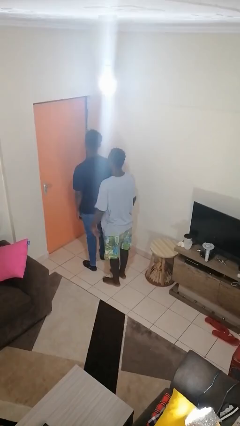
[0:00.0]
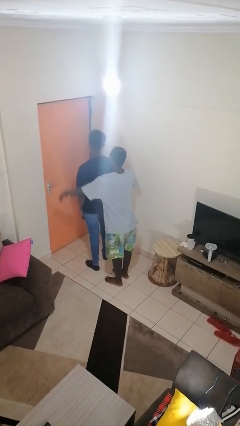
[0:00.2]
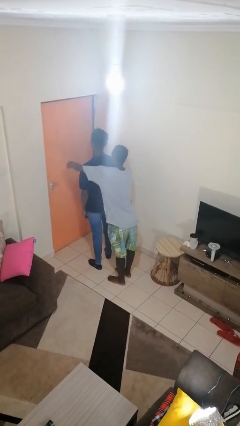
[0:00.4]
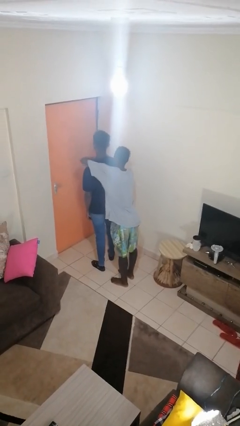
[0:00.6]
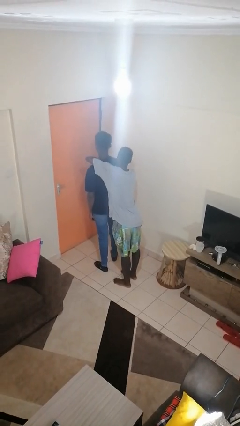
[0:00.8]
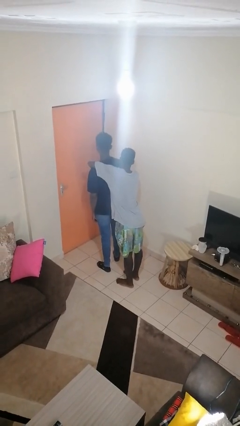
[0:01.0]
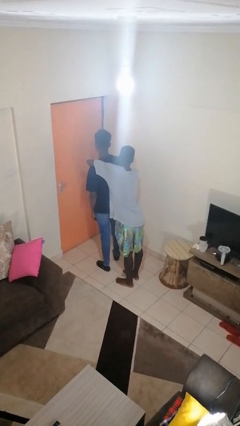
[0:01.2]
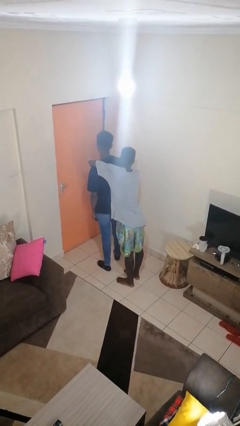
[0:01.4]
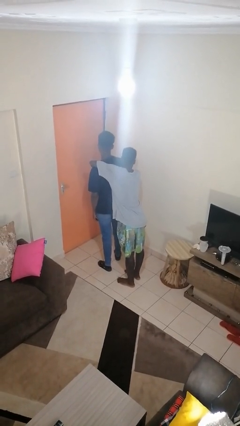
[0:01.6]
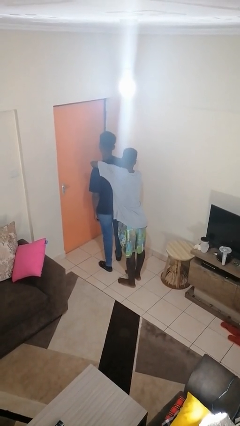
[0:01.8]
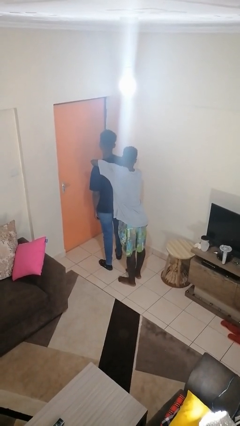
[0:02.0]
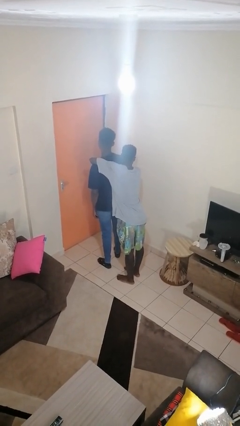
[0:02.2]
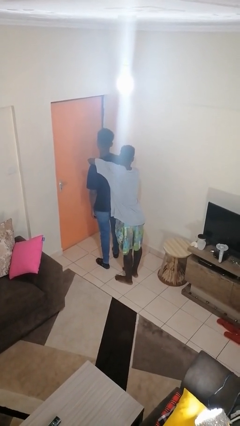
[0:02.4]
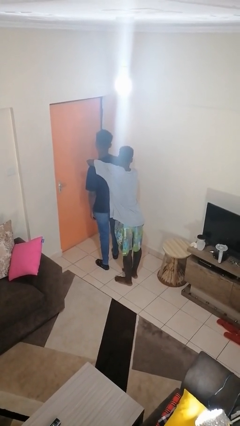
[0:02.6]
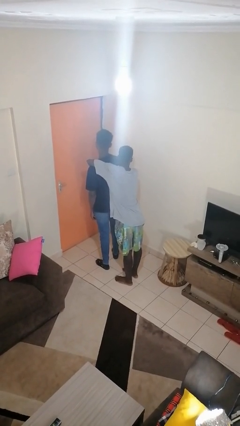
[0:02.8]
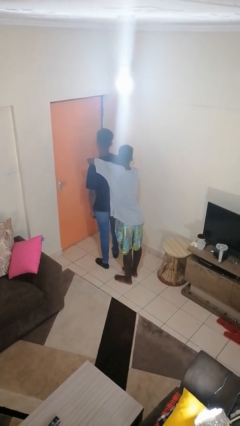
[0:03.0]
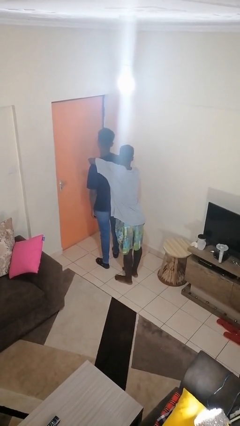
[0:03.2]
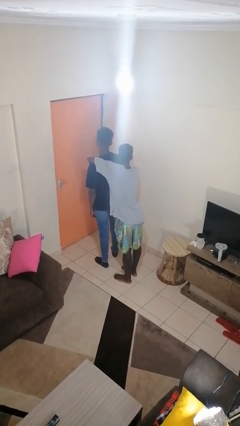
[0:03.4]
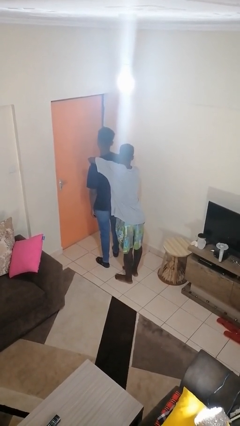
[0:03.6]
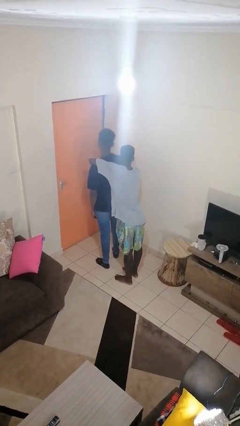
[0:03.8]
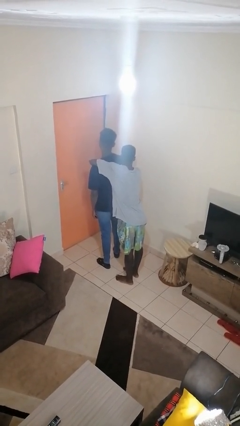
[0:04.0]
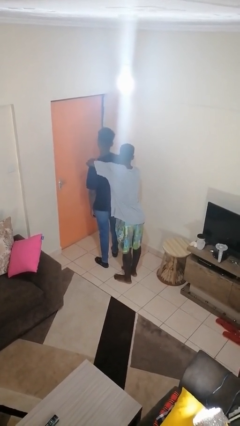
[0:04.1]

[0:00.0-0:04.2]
person hugs person from behind

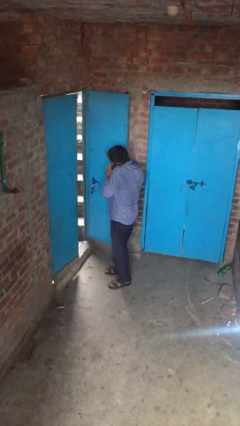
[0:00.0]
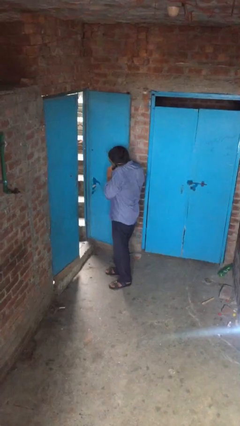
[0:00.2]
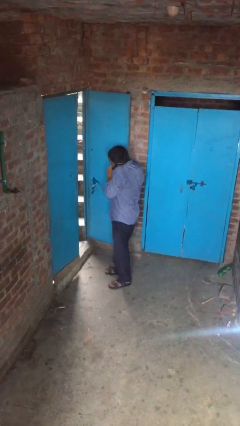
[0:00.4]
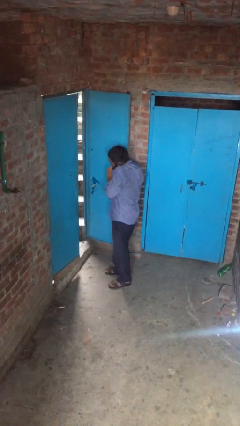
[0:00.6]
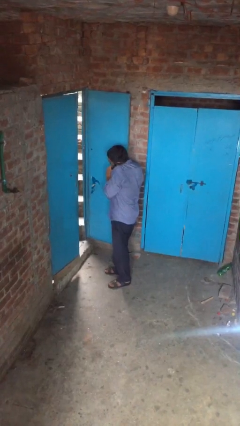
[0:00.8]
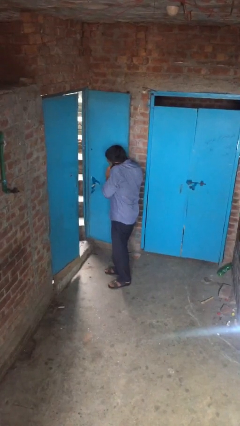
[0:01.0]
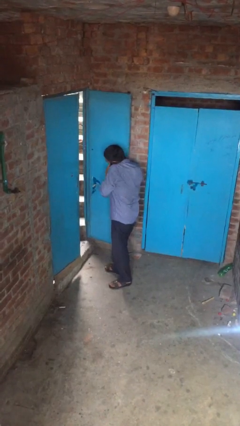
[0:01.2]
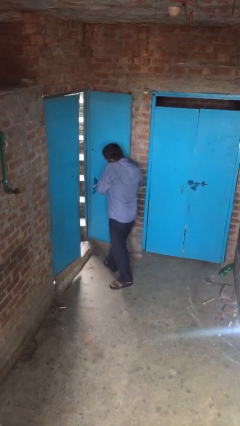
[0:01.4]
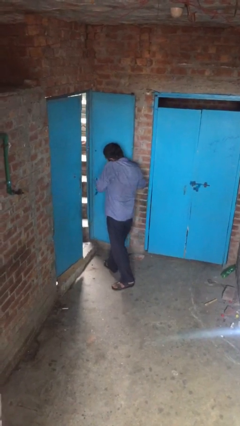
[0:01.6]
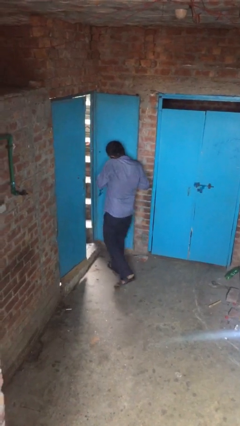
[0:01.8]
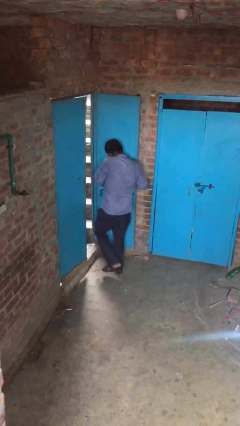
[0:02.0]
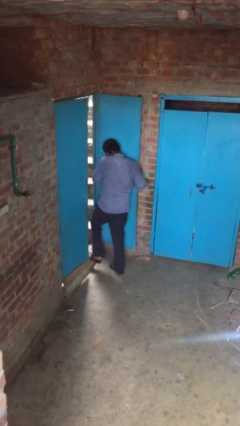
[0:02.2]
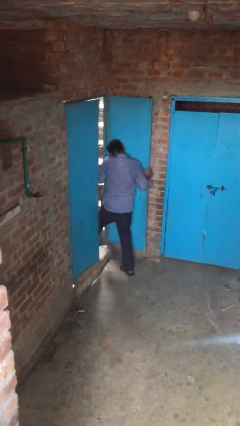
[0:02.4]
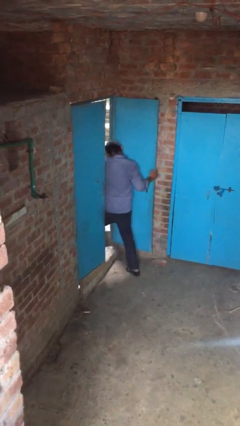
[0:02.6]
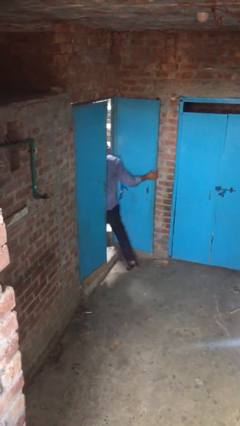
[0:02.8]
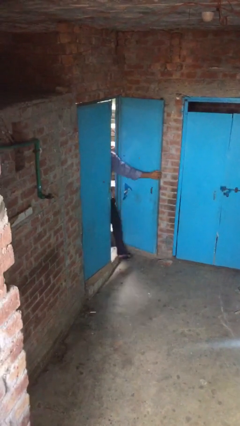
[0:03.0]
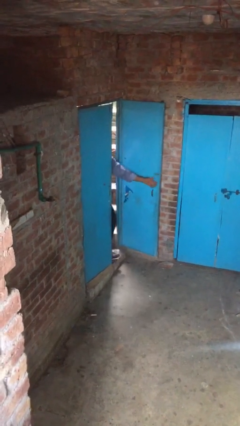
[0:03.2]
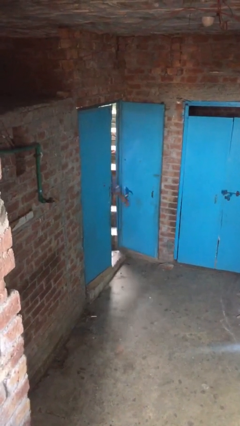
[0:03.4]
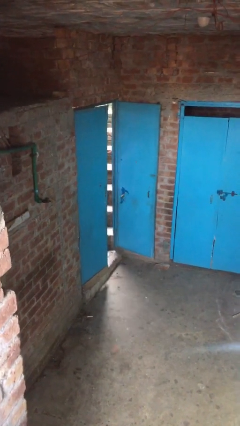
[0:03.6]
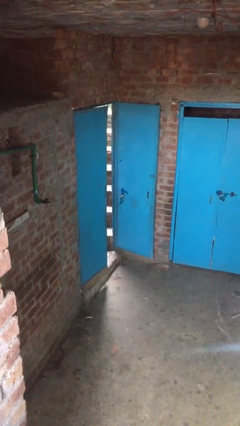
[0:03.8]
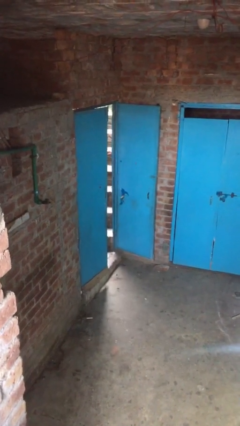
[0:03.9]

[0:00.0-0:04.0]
person exits scene through structure

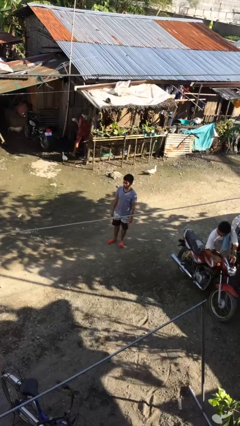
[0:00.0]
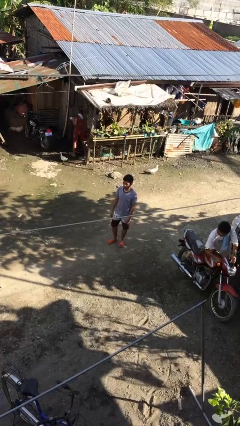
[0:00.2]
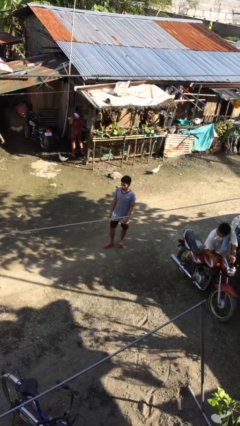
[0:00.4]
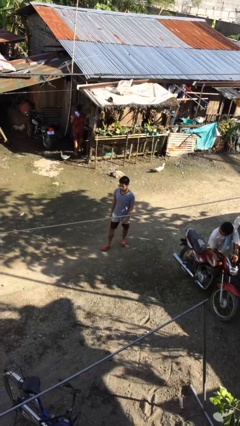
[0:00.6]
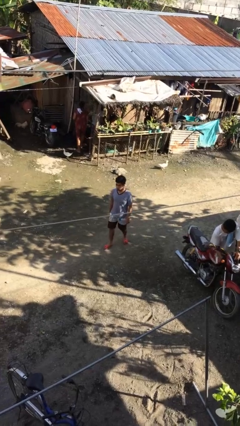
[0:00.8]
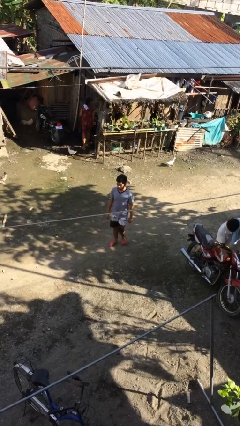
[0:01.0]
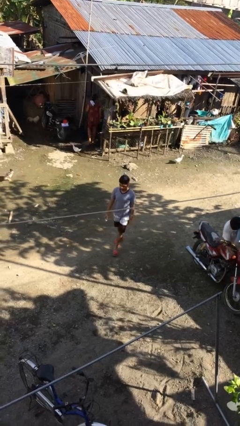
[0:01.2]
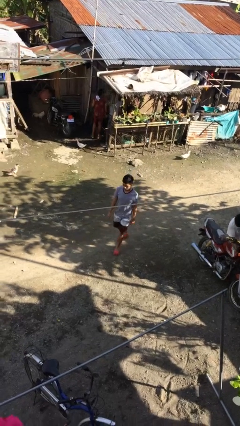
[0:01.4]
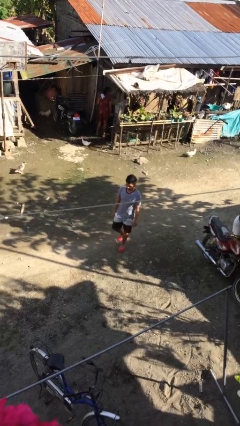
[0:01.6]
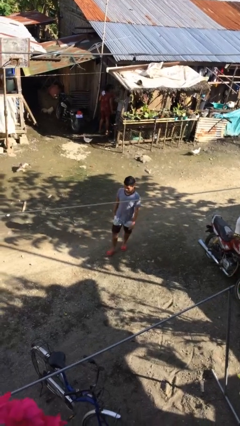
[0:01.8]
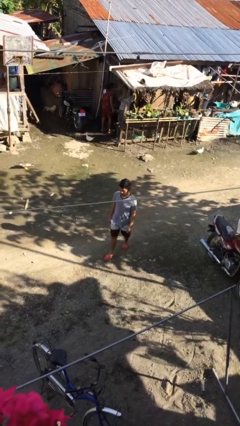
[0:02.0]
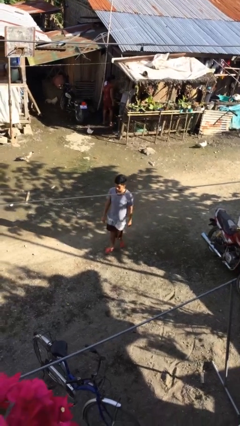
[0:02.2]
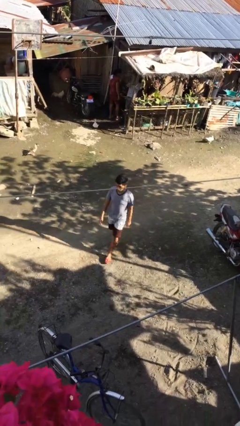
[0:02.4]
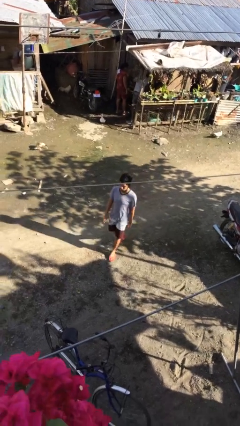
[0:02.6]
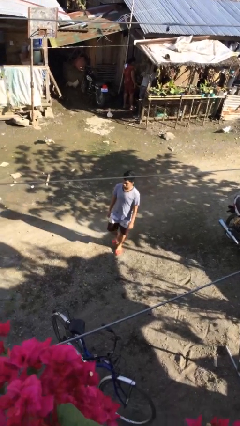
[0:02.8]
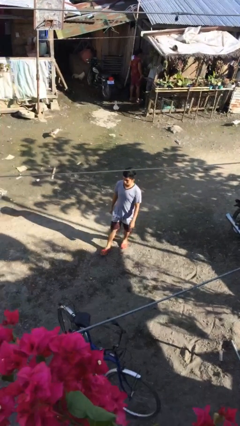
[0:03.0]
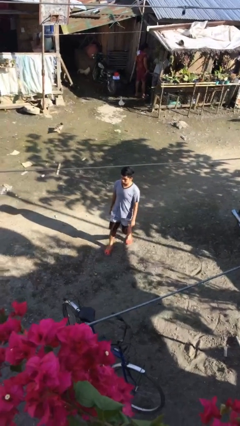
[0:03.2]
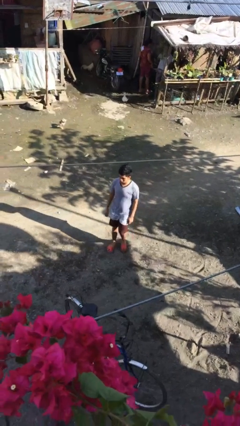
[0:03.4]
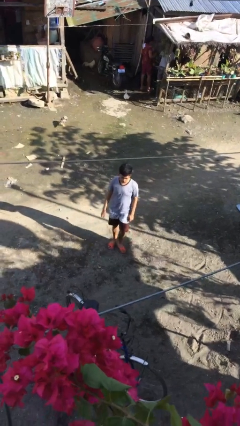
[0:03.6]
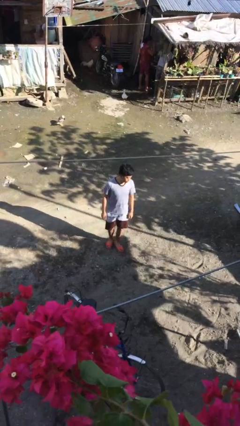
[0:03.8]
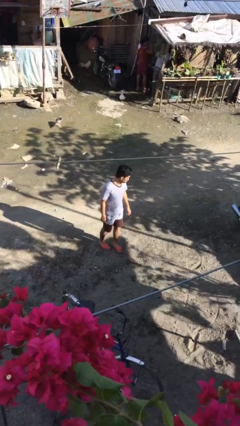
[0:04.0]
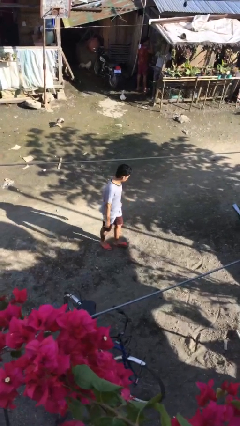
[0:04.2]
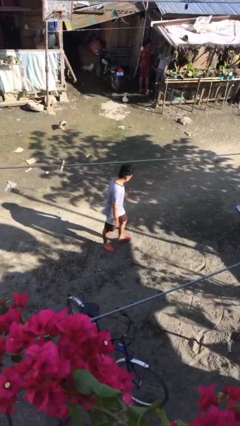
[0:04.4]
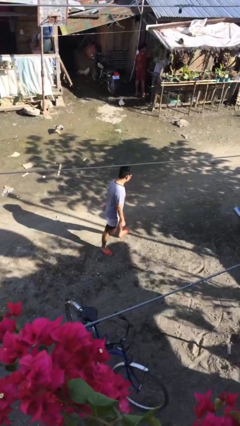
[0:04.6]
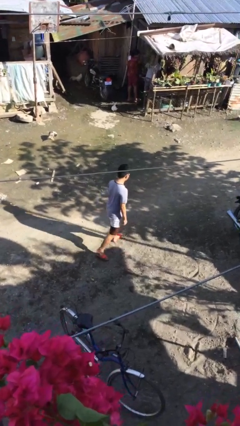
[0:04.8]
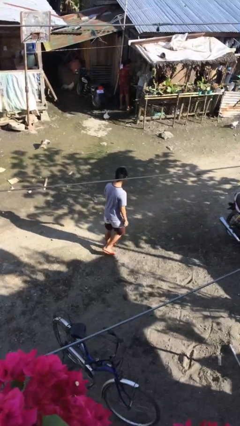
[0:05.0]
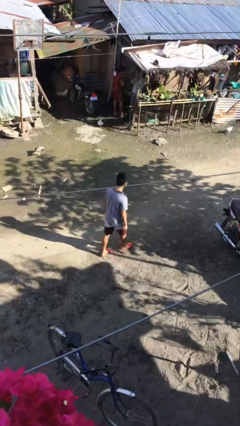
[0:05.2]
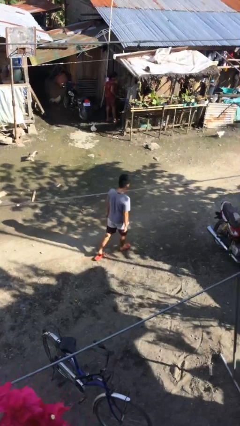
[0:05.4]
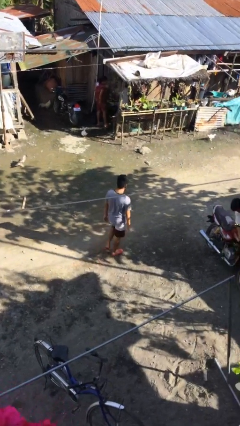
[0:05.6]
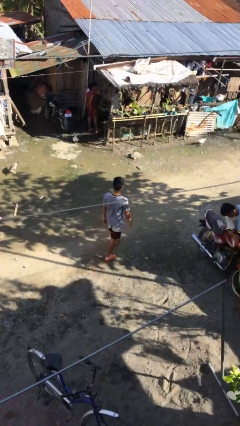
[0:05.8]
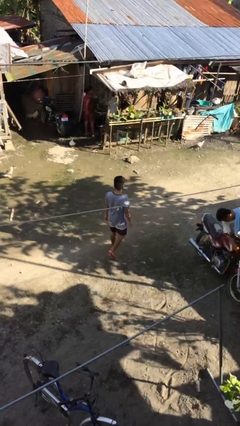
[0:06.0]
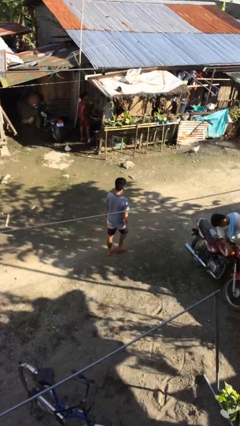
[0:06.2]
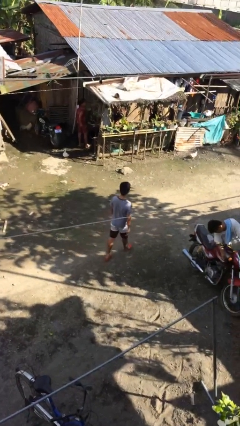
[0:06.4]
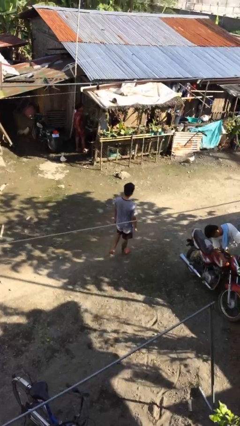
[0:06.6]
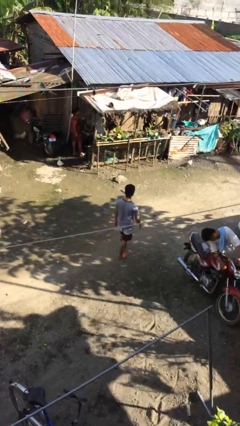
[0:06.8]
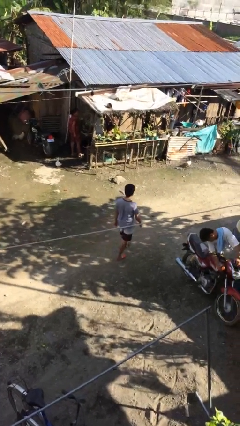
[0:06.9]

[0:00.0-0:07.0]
person walks

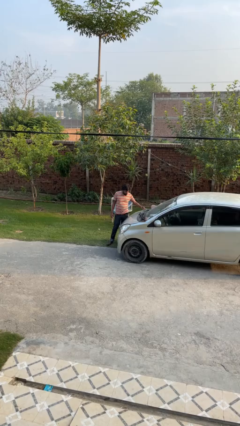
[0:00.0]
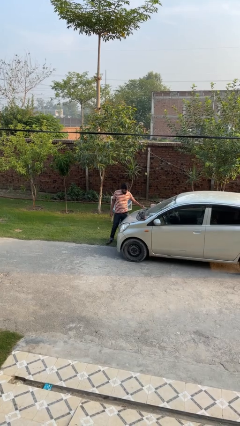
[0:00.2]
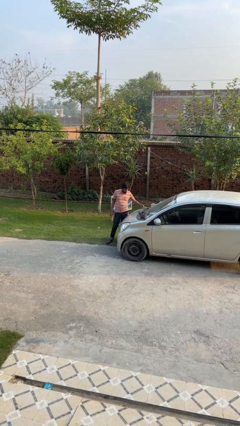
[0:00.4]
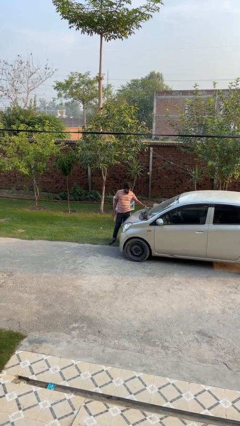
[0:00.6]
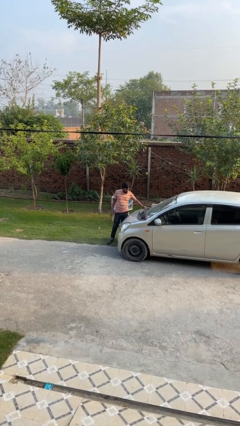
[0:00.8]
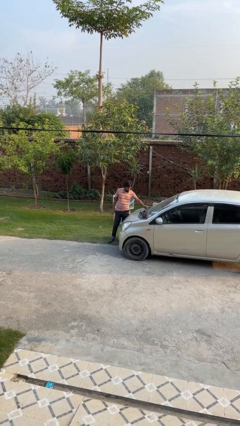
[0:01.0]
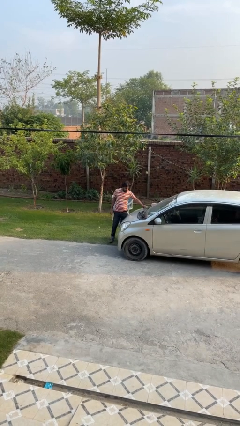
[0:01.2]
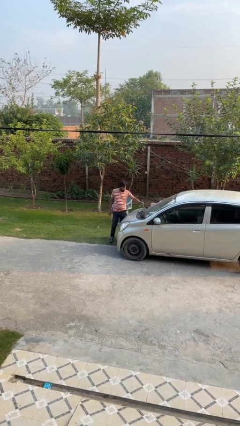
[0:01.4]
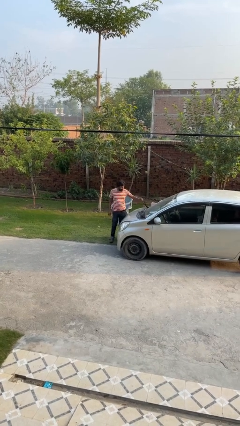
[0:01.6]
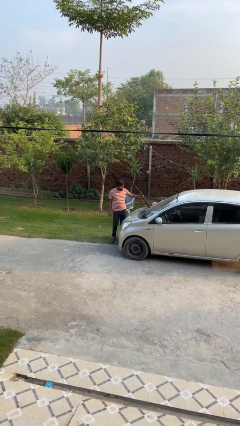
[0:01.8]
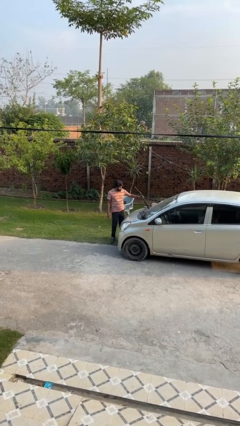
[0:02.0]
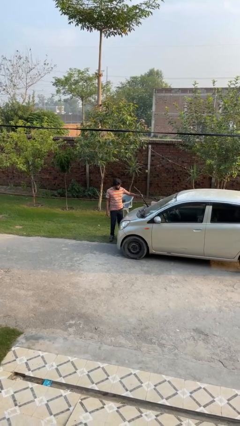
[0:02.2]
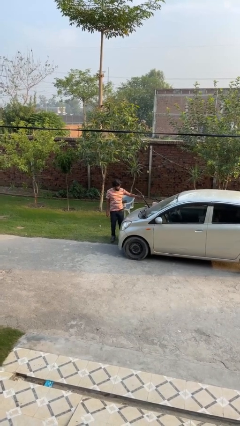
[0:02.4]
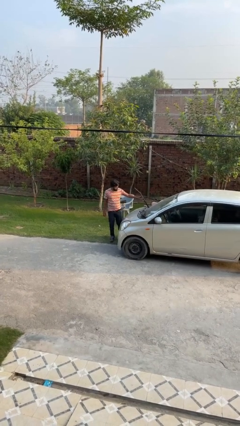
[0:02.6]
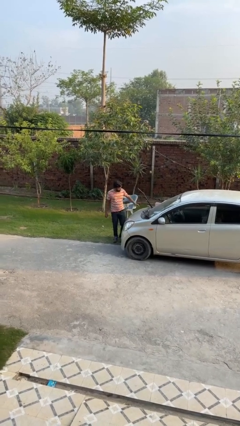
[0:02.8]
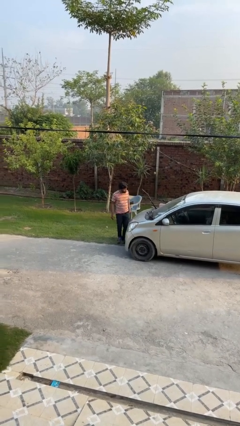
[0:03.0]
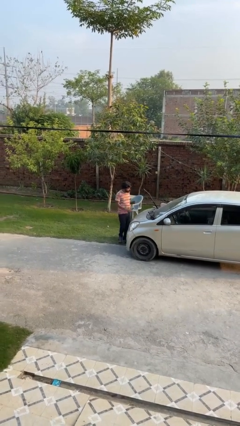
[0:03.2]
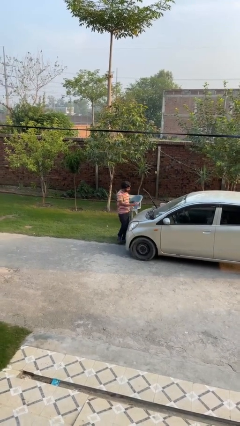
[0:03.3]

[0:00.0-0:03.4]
person flips up car wipers
